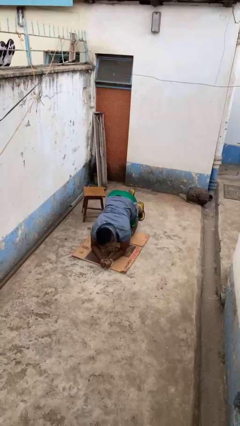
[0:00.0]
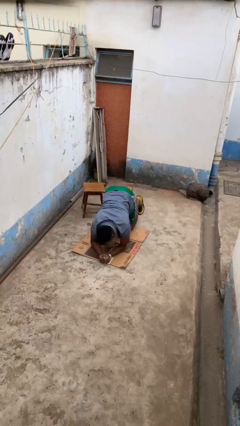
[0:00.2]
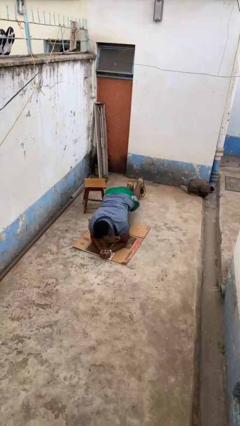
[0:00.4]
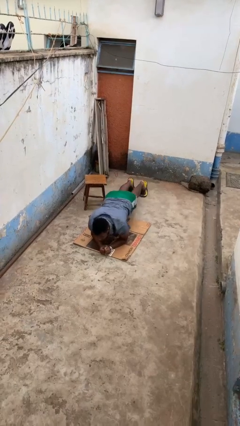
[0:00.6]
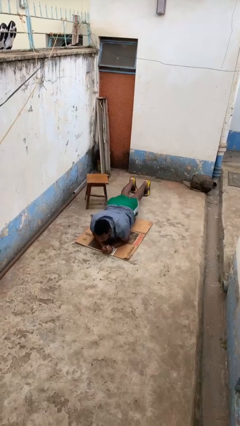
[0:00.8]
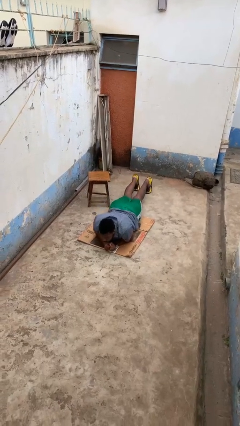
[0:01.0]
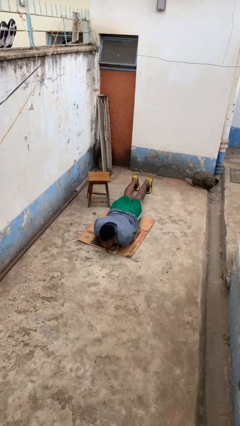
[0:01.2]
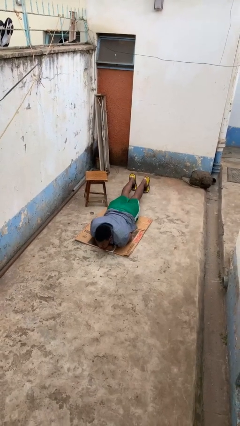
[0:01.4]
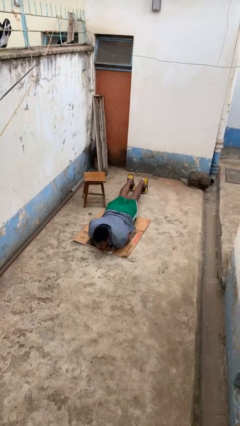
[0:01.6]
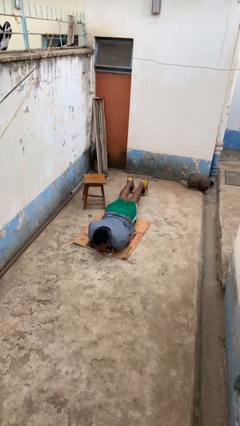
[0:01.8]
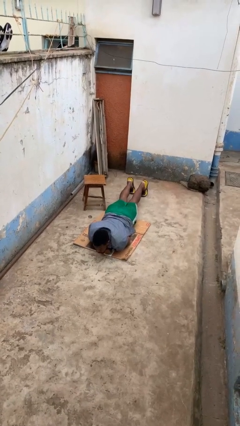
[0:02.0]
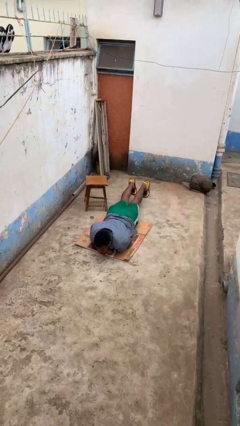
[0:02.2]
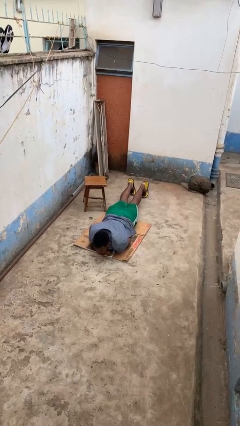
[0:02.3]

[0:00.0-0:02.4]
person lies down on floor

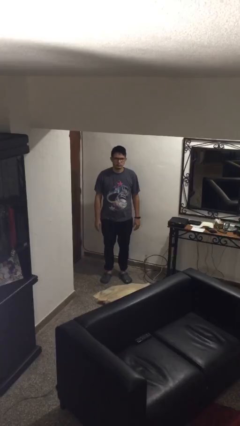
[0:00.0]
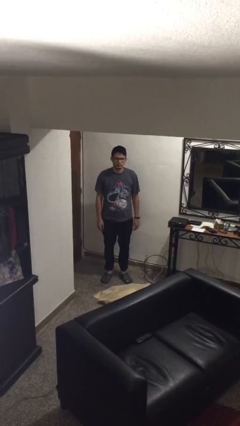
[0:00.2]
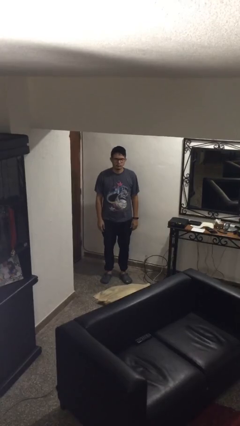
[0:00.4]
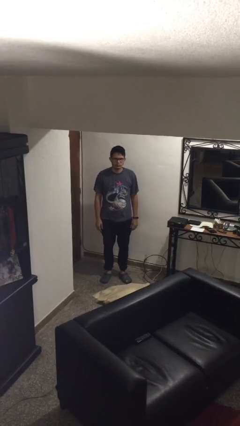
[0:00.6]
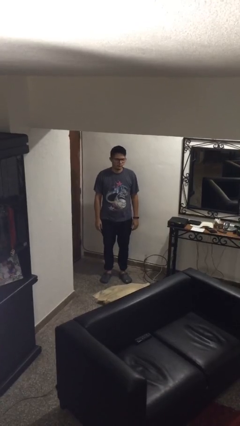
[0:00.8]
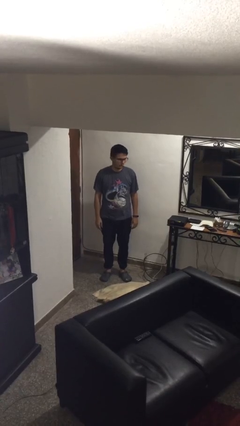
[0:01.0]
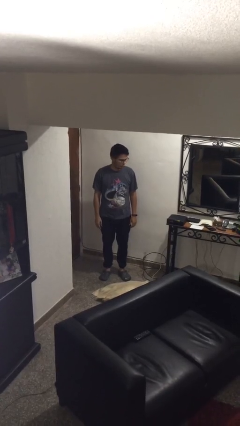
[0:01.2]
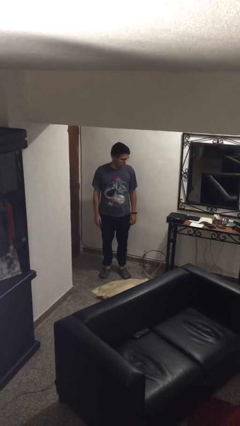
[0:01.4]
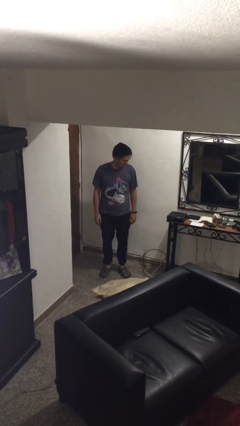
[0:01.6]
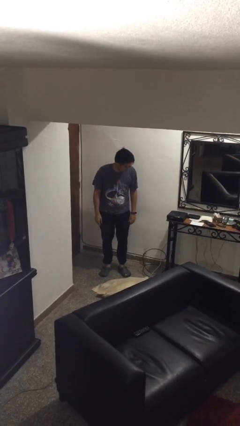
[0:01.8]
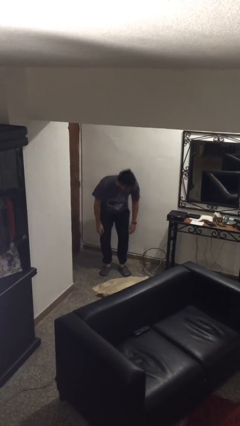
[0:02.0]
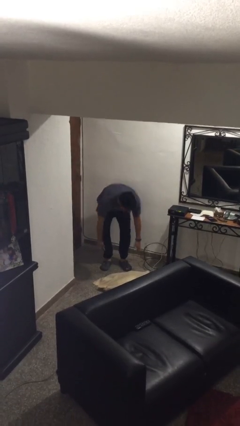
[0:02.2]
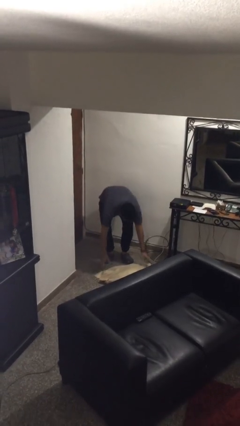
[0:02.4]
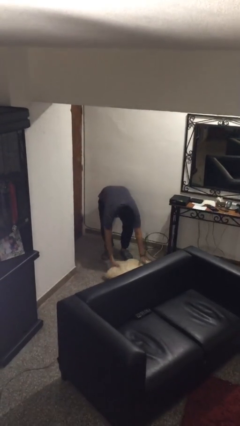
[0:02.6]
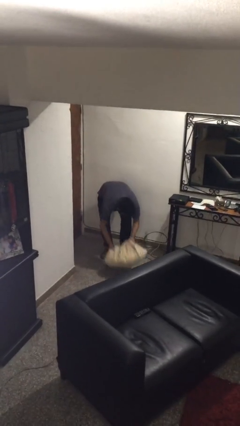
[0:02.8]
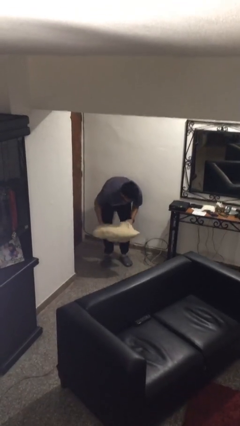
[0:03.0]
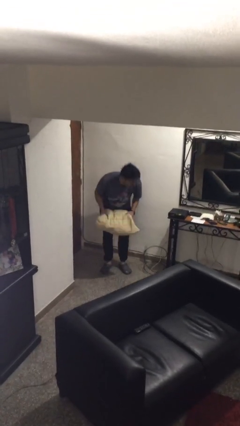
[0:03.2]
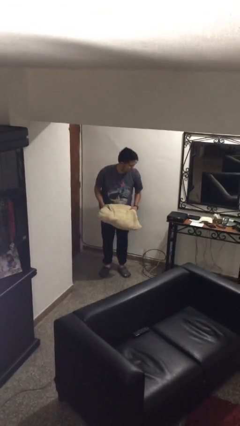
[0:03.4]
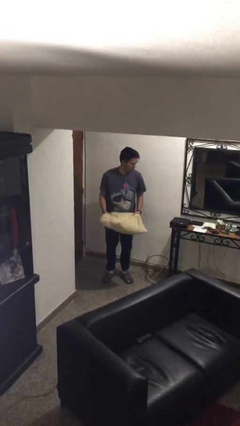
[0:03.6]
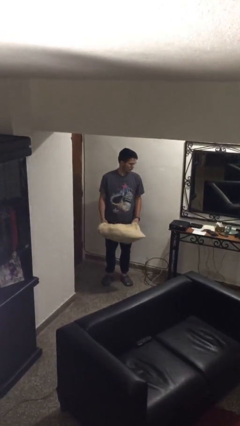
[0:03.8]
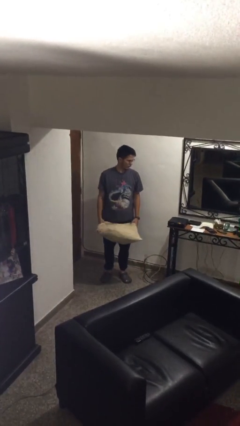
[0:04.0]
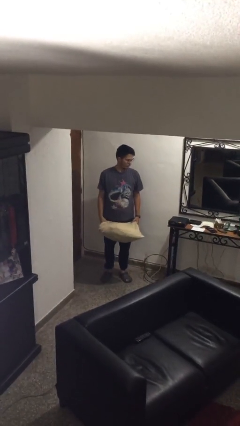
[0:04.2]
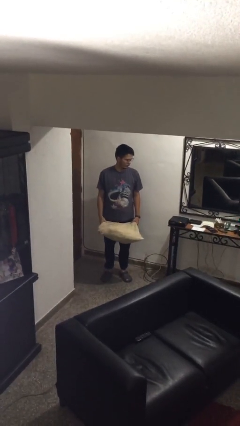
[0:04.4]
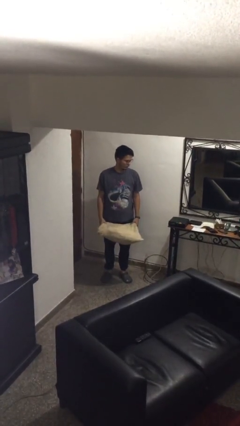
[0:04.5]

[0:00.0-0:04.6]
person picks up object from floor

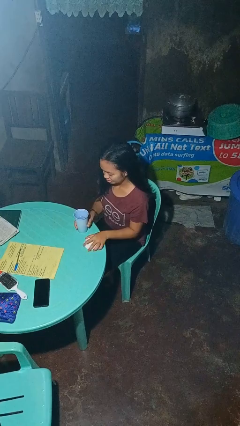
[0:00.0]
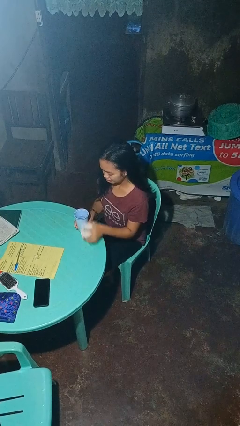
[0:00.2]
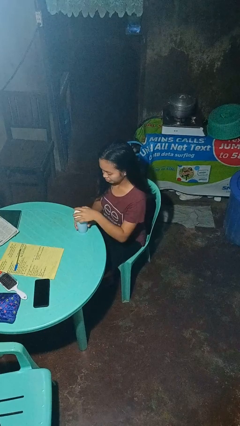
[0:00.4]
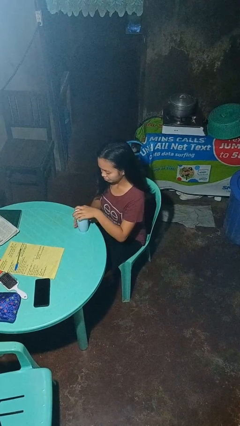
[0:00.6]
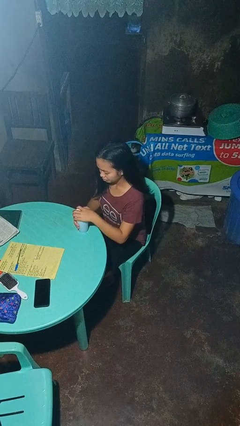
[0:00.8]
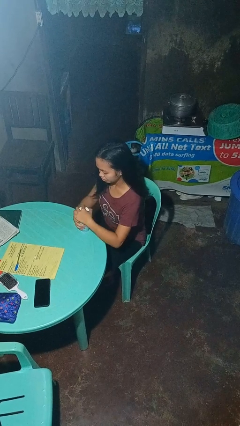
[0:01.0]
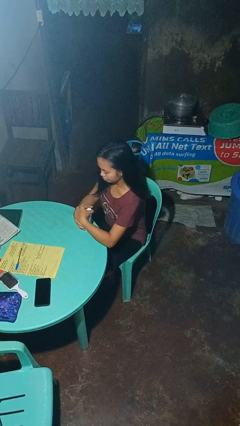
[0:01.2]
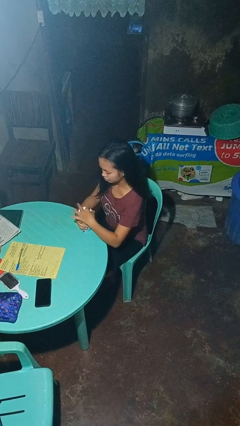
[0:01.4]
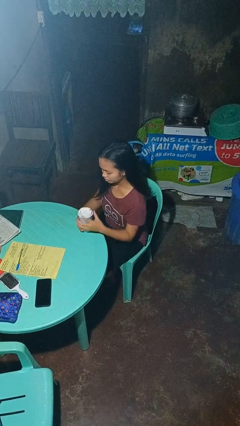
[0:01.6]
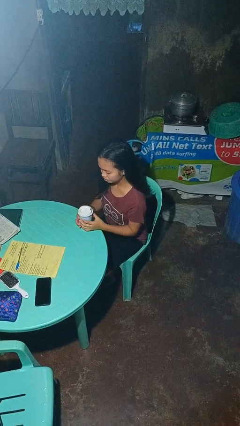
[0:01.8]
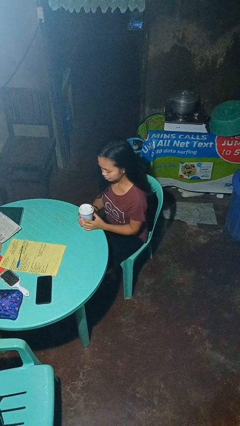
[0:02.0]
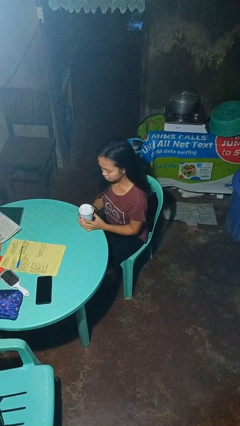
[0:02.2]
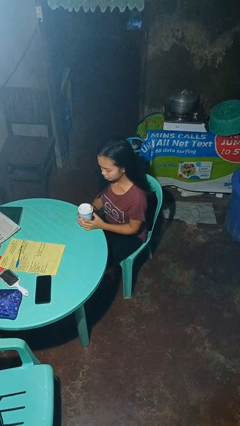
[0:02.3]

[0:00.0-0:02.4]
person screws lid to bottle

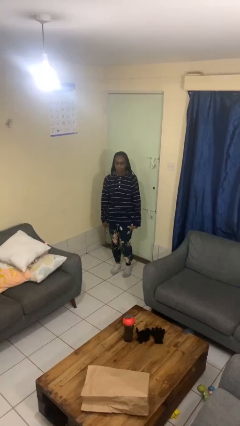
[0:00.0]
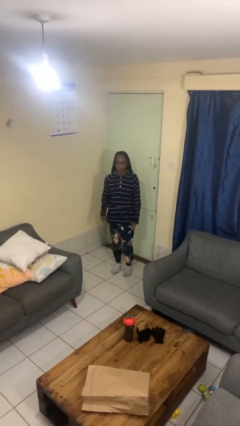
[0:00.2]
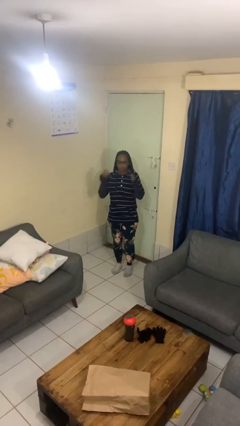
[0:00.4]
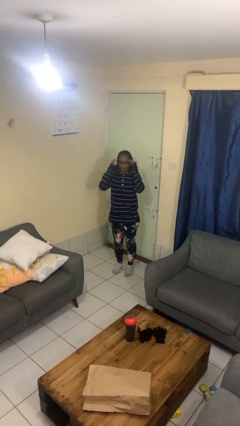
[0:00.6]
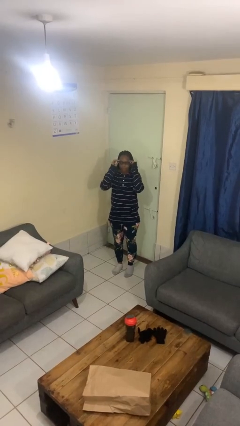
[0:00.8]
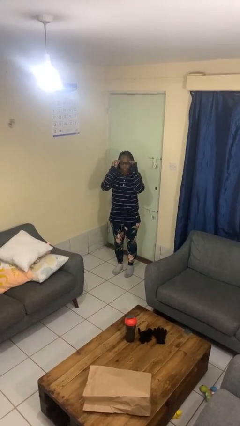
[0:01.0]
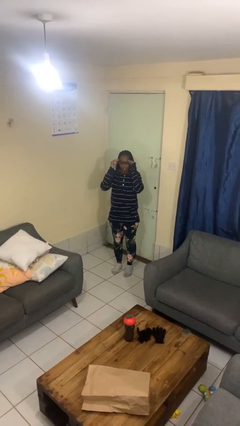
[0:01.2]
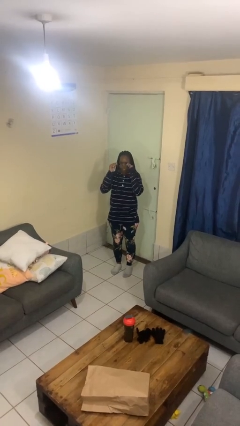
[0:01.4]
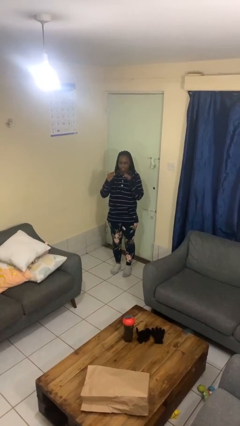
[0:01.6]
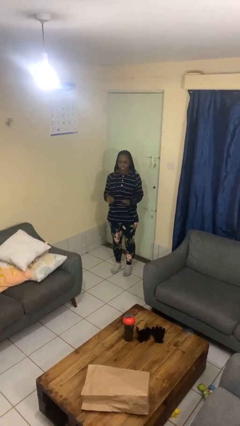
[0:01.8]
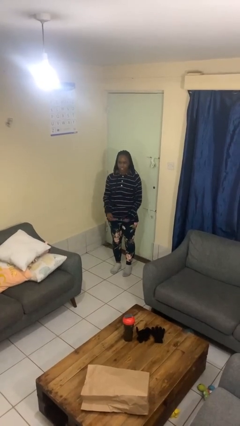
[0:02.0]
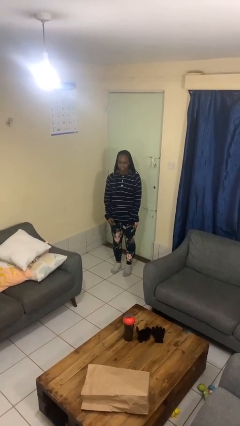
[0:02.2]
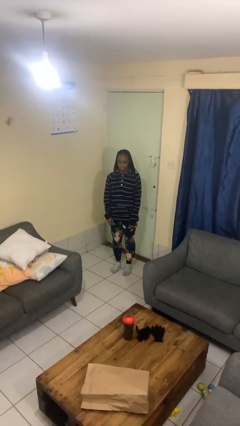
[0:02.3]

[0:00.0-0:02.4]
person takes off glasses

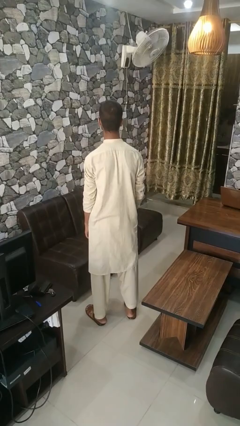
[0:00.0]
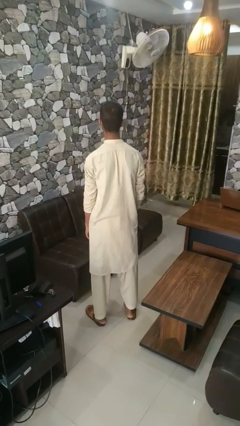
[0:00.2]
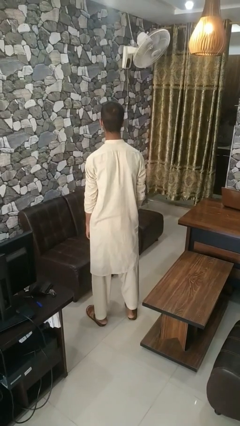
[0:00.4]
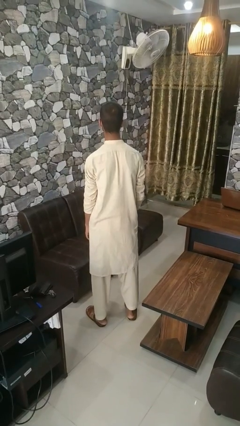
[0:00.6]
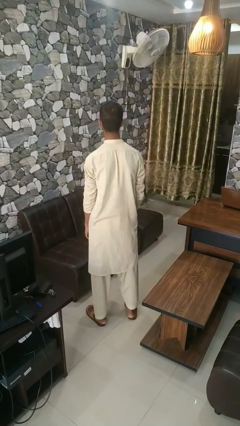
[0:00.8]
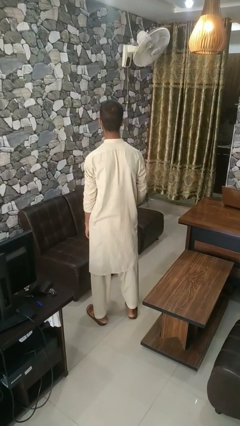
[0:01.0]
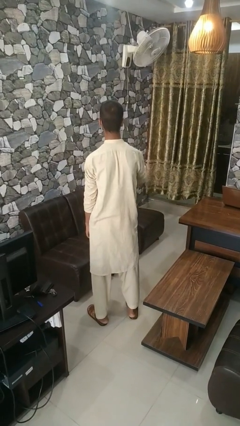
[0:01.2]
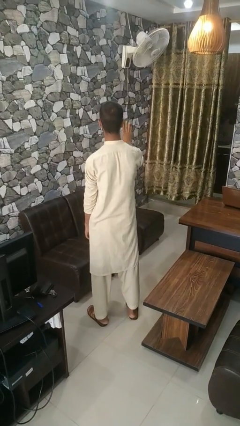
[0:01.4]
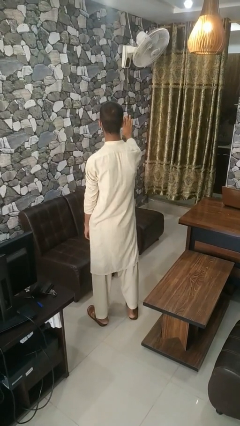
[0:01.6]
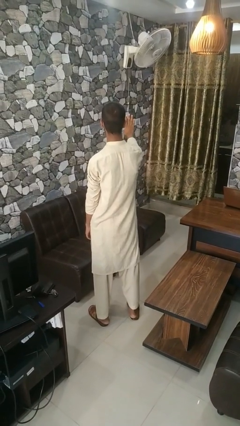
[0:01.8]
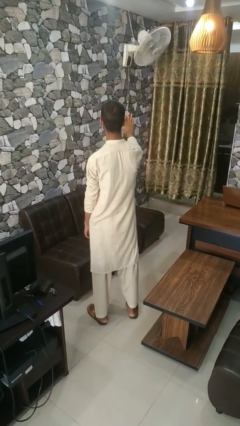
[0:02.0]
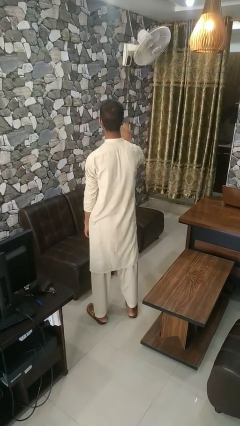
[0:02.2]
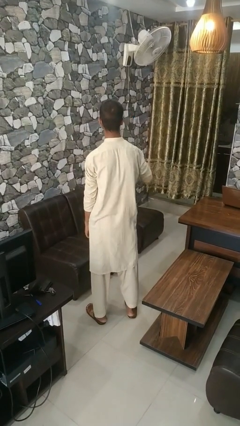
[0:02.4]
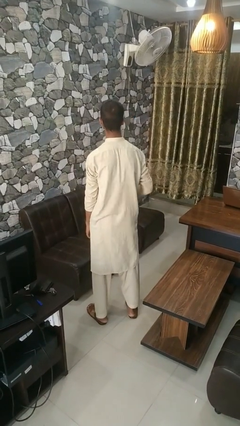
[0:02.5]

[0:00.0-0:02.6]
person gestures number four

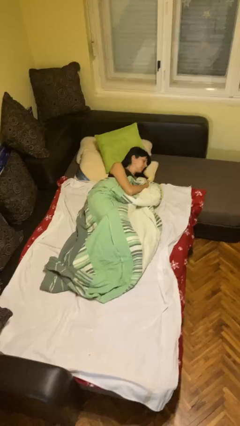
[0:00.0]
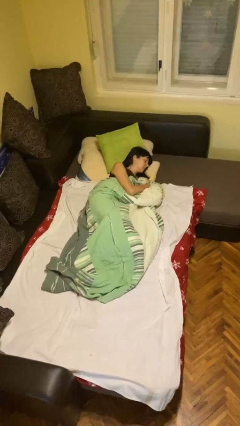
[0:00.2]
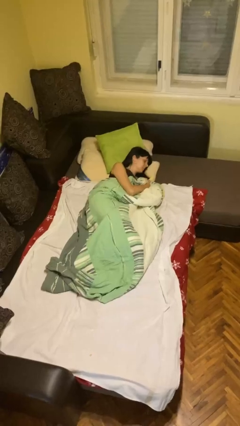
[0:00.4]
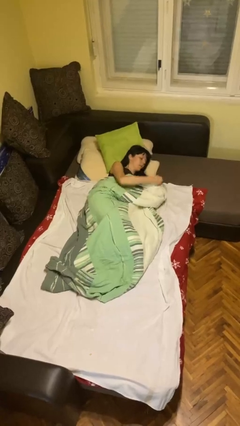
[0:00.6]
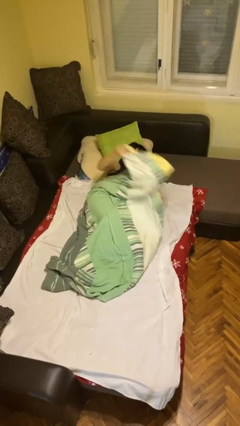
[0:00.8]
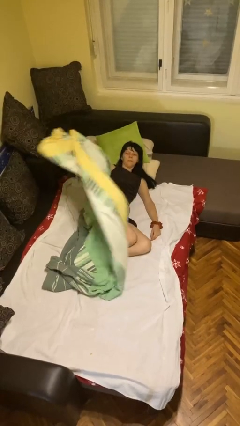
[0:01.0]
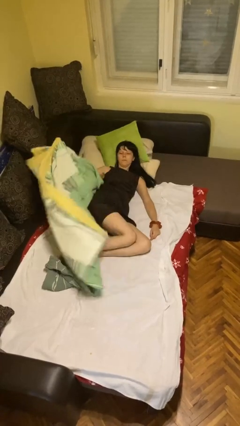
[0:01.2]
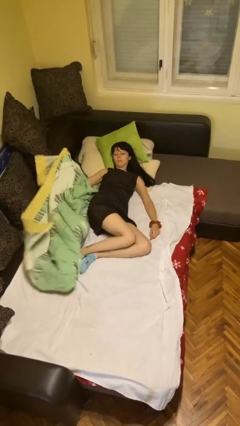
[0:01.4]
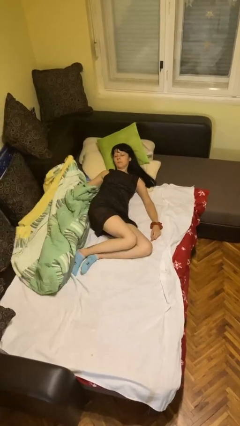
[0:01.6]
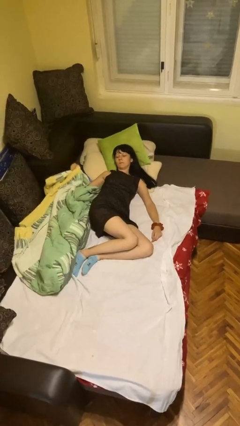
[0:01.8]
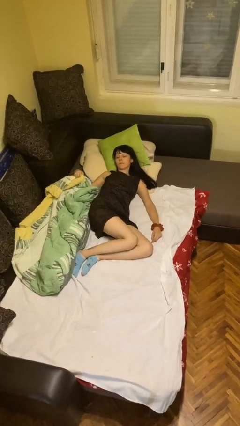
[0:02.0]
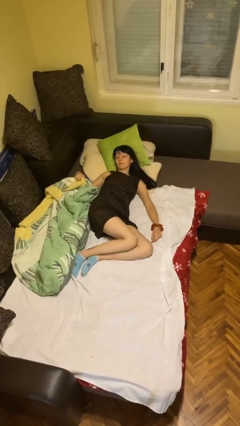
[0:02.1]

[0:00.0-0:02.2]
person uncovers with bedsheets

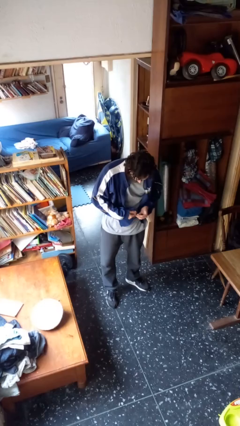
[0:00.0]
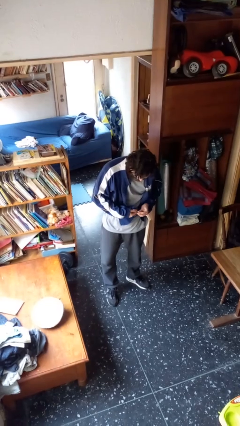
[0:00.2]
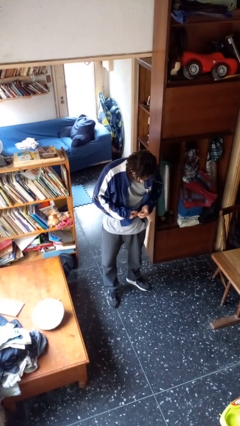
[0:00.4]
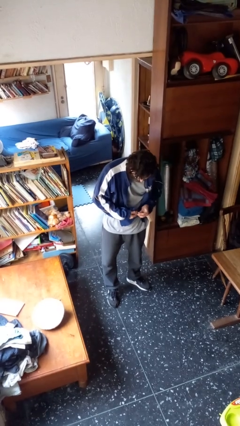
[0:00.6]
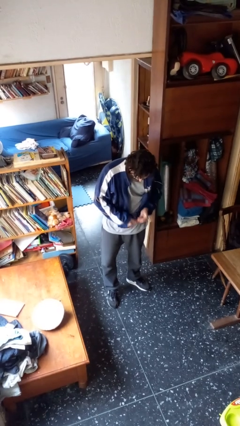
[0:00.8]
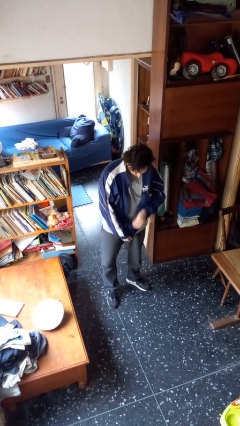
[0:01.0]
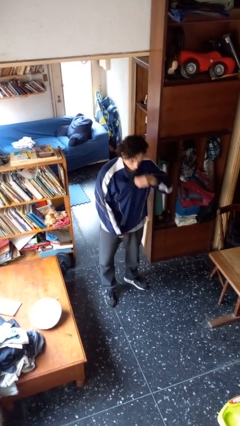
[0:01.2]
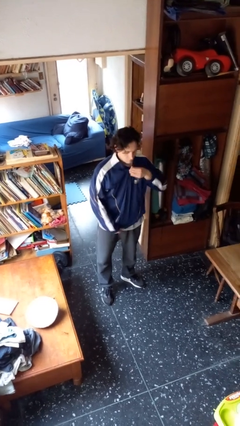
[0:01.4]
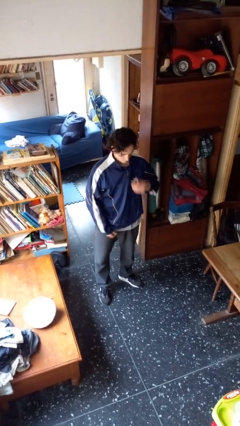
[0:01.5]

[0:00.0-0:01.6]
person zips up jacket
